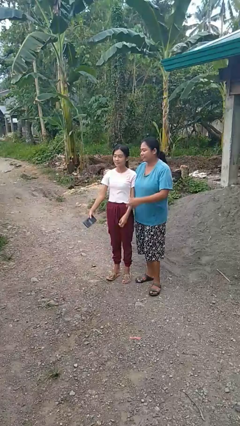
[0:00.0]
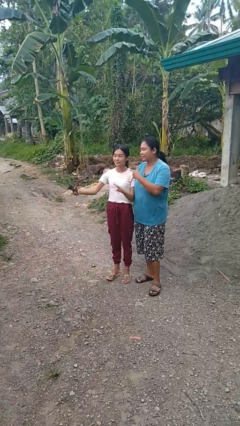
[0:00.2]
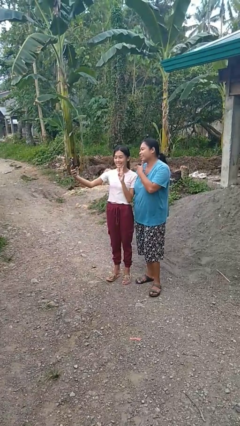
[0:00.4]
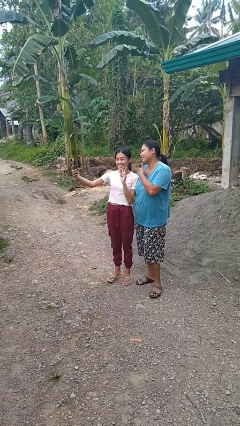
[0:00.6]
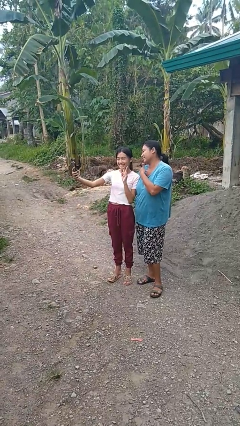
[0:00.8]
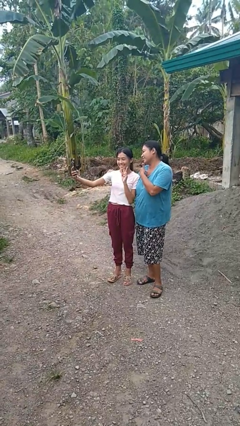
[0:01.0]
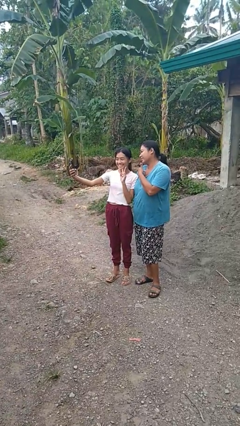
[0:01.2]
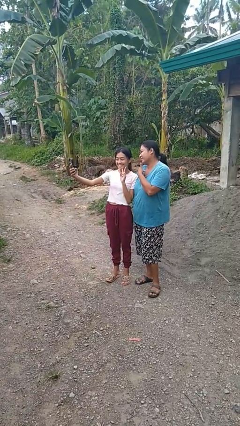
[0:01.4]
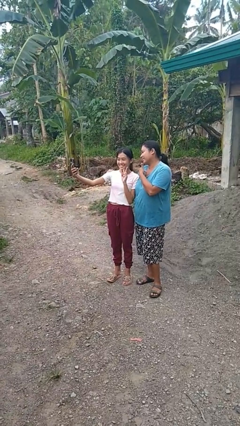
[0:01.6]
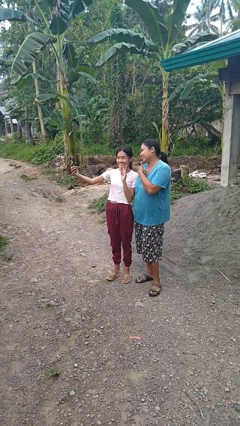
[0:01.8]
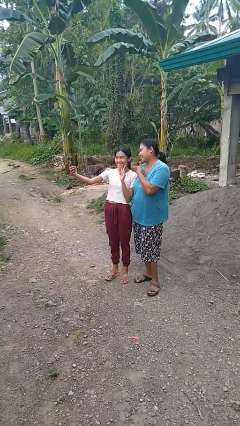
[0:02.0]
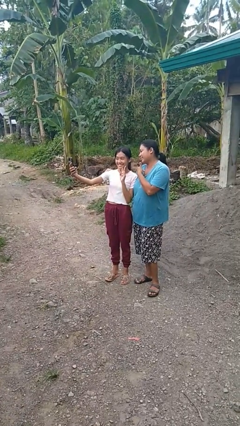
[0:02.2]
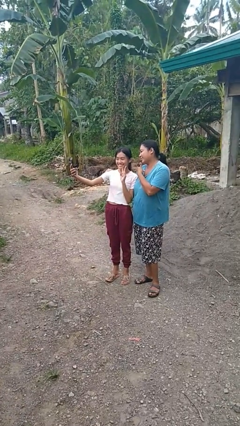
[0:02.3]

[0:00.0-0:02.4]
person takes selfie with person

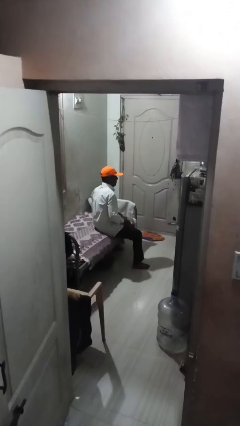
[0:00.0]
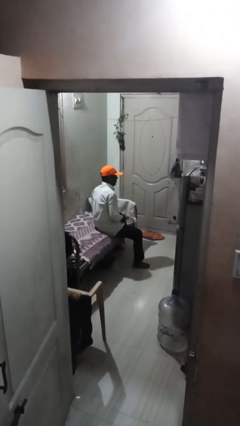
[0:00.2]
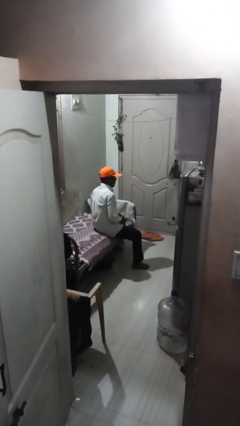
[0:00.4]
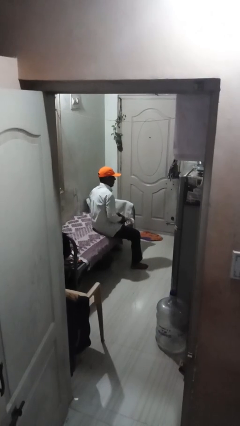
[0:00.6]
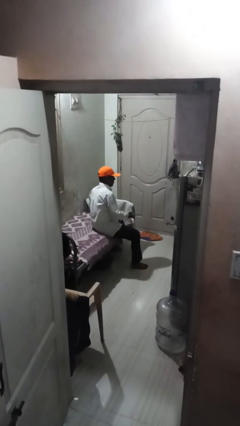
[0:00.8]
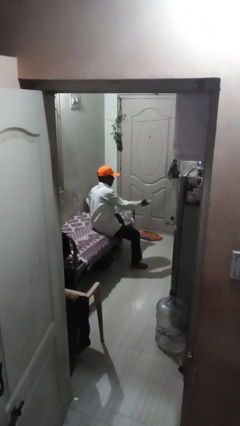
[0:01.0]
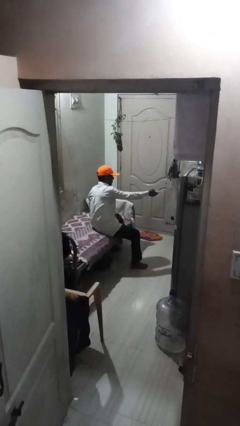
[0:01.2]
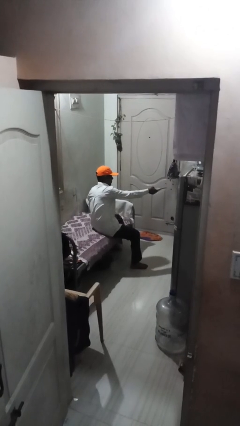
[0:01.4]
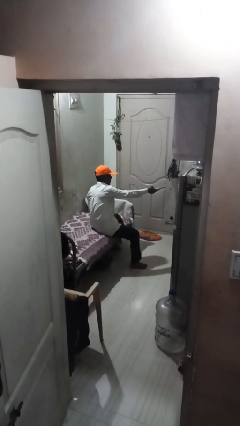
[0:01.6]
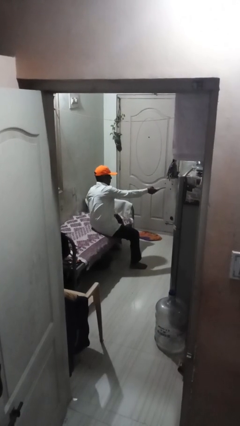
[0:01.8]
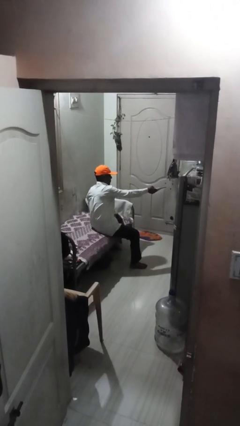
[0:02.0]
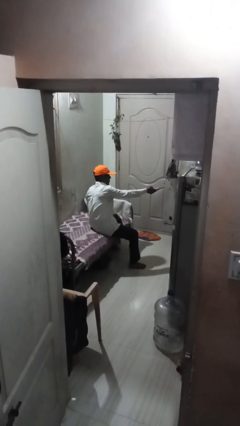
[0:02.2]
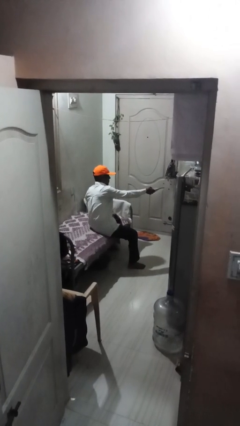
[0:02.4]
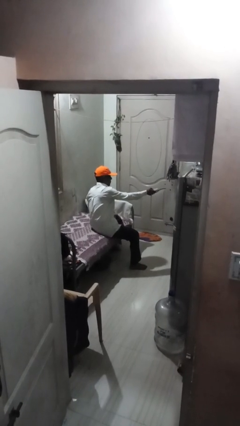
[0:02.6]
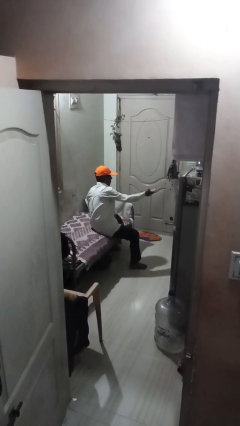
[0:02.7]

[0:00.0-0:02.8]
person uses television remote

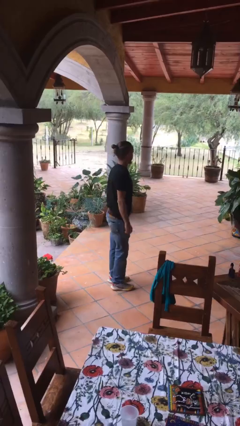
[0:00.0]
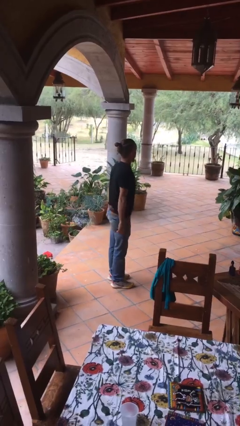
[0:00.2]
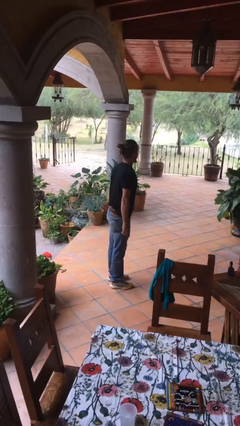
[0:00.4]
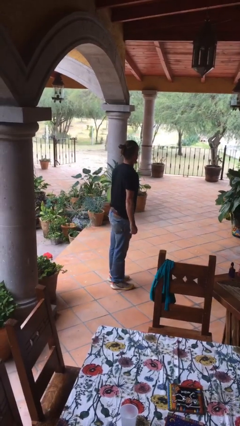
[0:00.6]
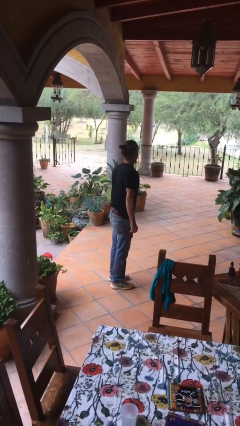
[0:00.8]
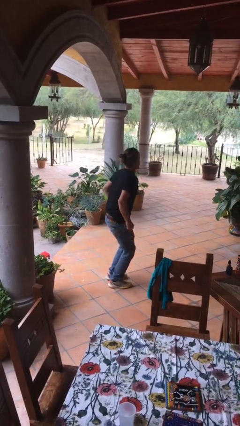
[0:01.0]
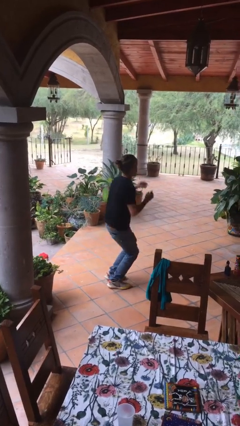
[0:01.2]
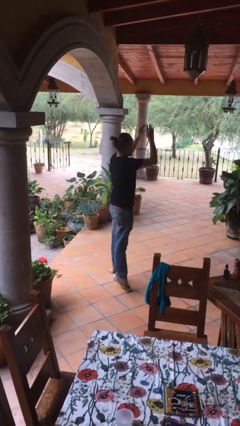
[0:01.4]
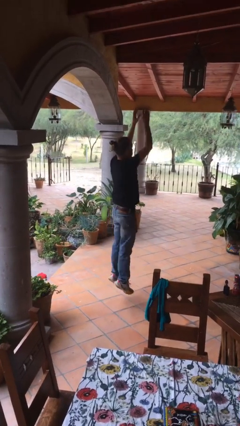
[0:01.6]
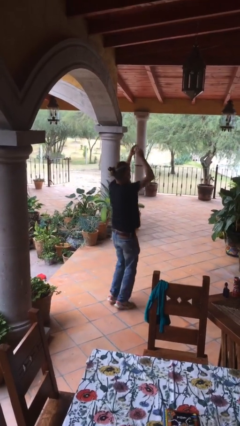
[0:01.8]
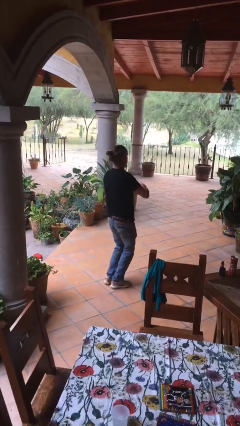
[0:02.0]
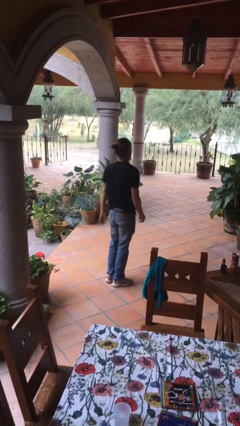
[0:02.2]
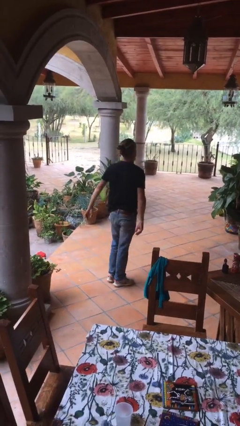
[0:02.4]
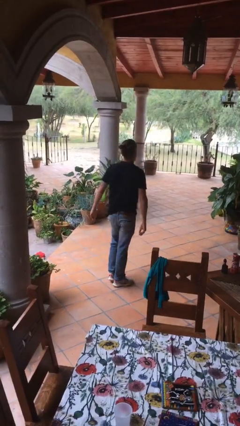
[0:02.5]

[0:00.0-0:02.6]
person jumps

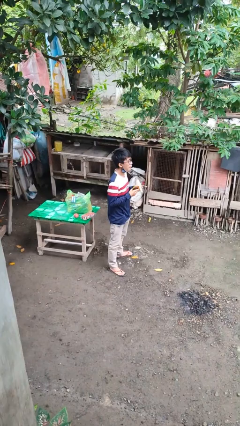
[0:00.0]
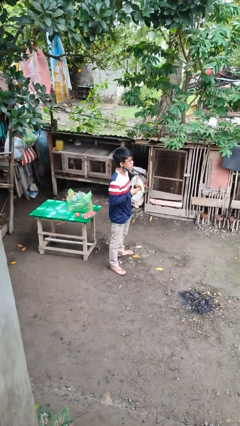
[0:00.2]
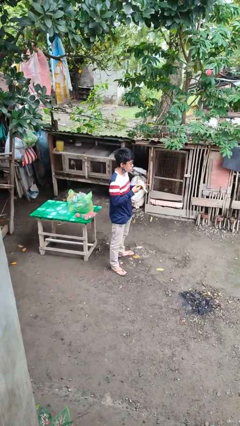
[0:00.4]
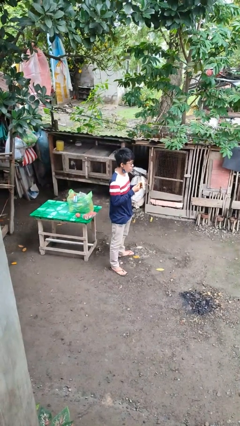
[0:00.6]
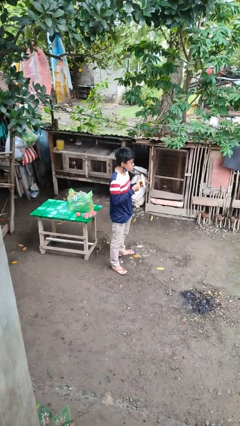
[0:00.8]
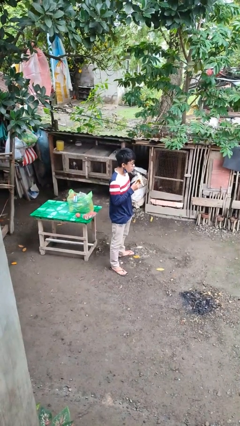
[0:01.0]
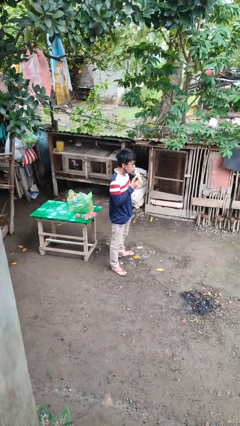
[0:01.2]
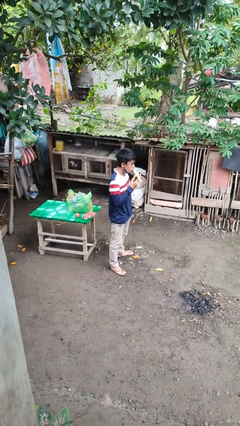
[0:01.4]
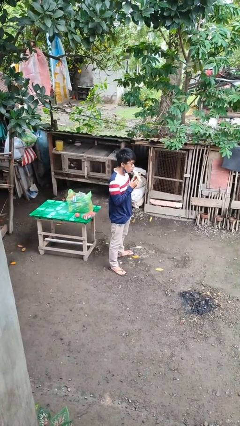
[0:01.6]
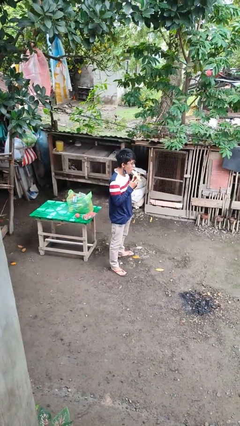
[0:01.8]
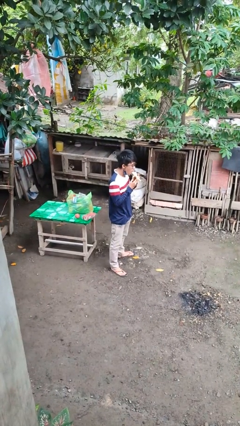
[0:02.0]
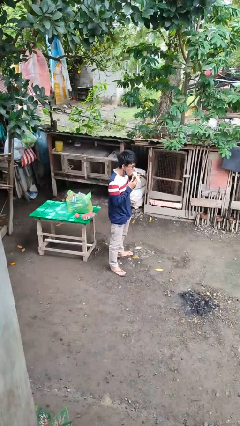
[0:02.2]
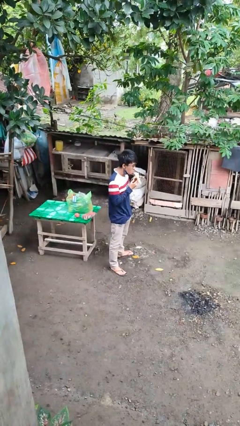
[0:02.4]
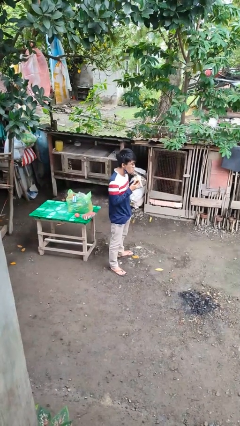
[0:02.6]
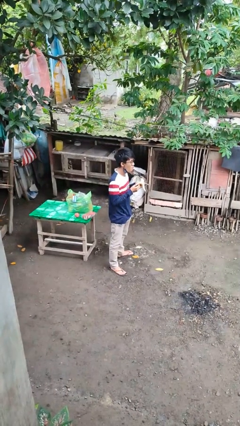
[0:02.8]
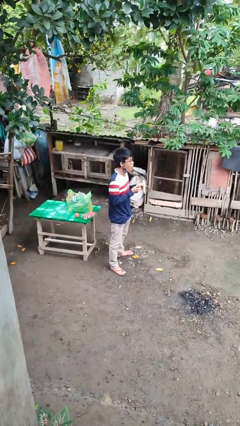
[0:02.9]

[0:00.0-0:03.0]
person eats banana

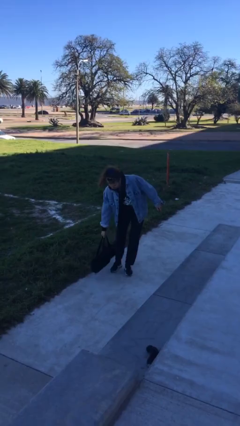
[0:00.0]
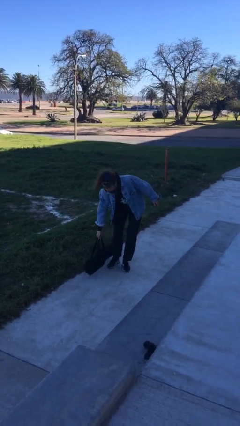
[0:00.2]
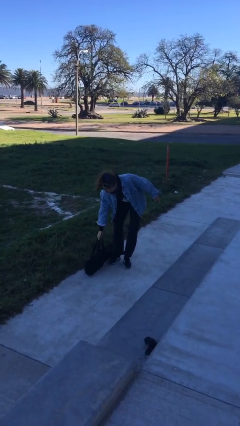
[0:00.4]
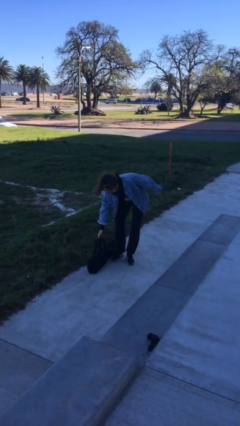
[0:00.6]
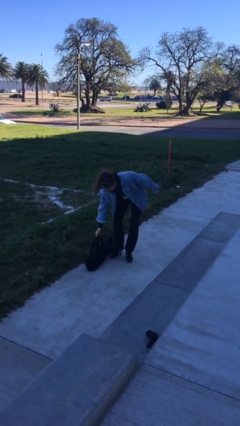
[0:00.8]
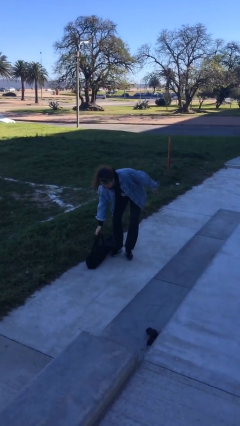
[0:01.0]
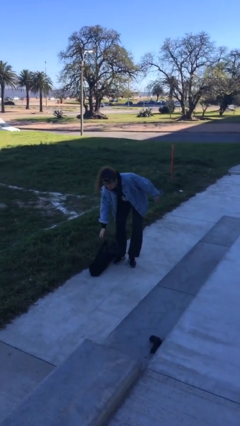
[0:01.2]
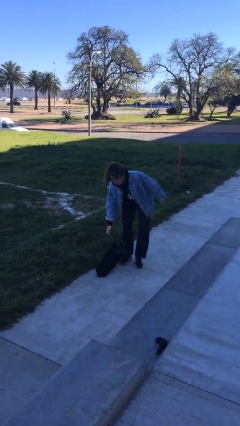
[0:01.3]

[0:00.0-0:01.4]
person puts down object on floor

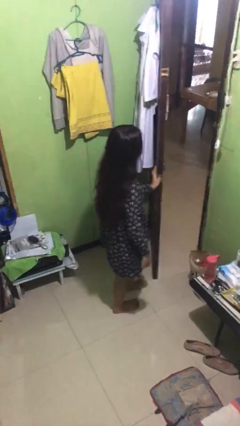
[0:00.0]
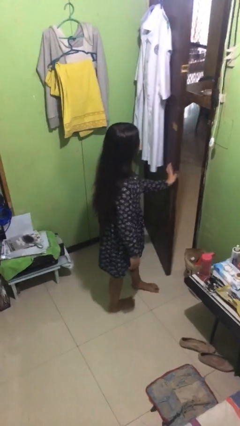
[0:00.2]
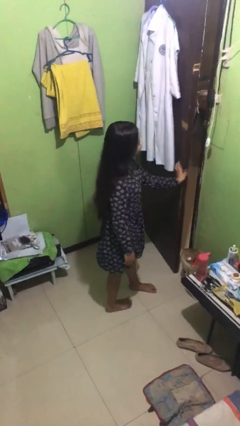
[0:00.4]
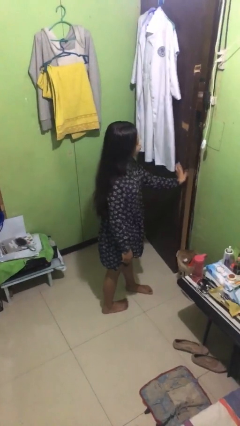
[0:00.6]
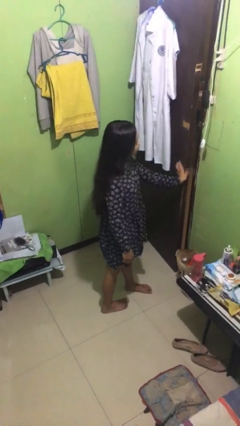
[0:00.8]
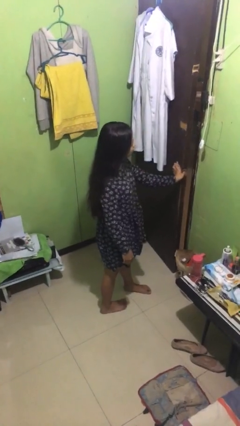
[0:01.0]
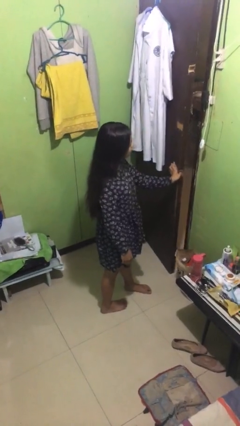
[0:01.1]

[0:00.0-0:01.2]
person closes facility door

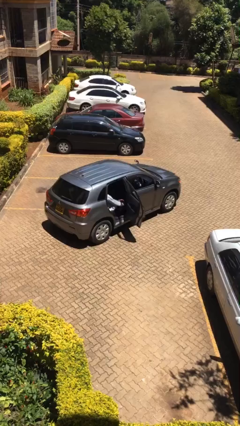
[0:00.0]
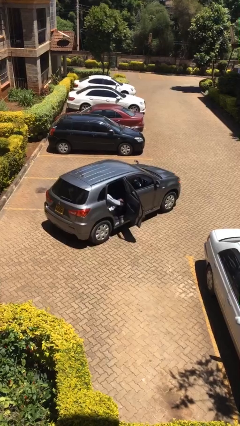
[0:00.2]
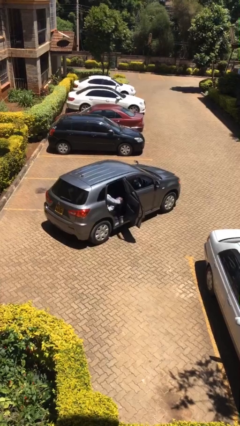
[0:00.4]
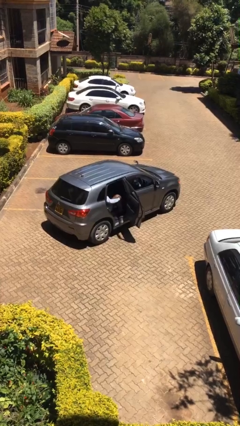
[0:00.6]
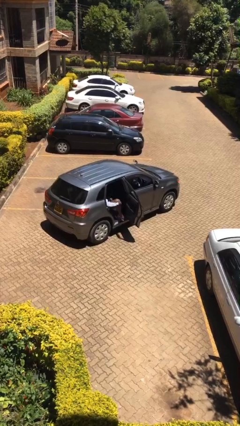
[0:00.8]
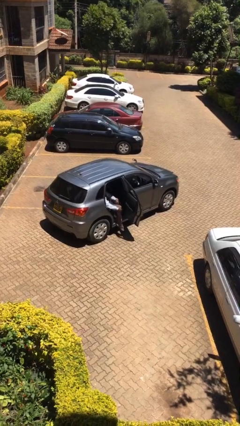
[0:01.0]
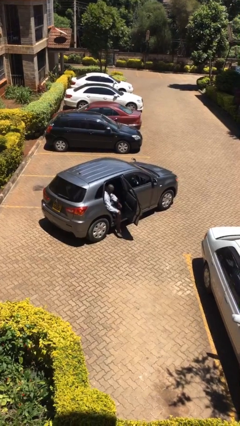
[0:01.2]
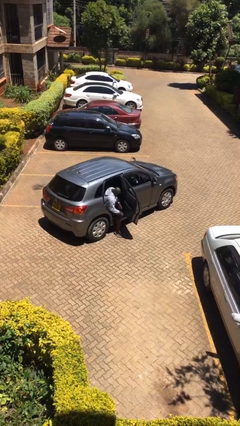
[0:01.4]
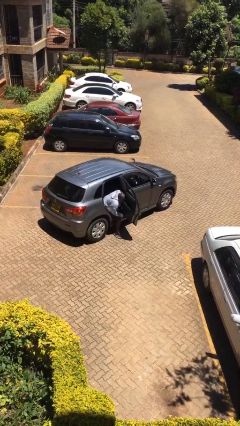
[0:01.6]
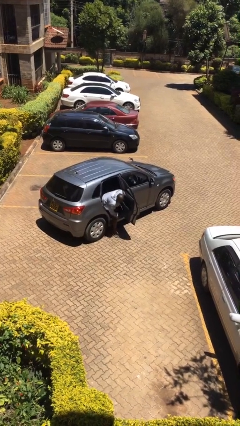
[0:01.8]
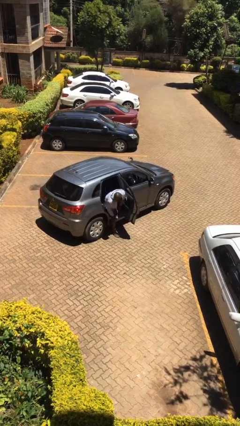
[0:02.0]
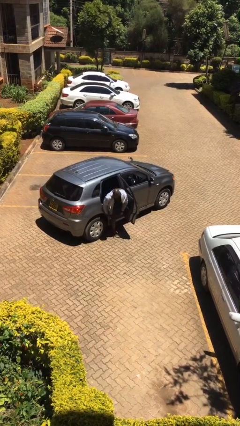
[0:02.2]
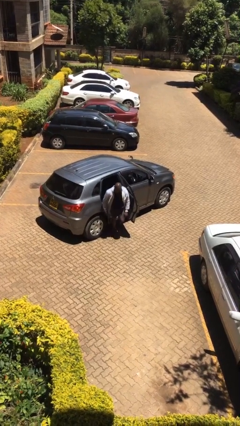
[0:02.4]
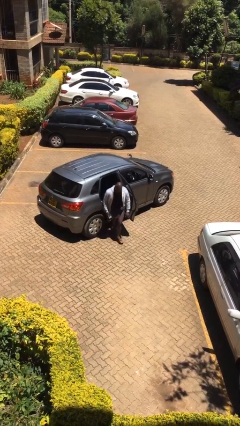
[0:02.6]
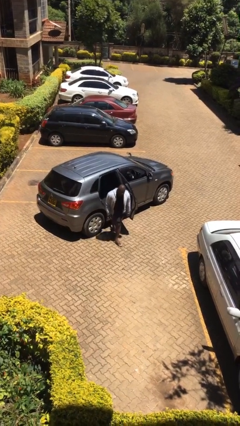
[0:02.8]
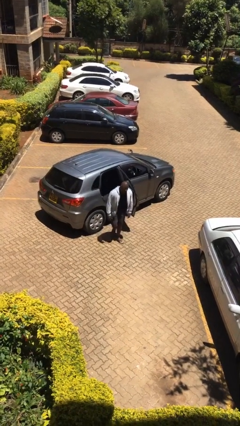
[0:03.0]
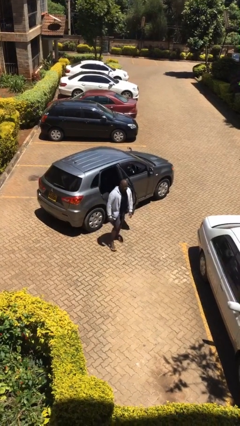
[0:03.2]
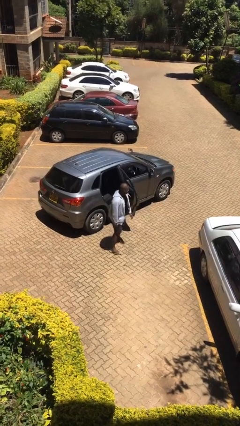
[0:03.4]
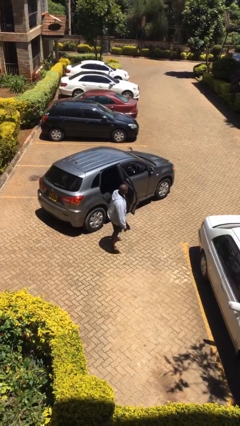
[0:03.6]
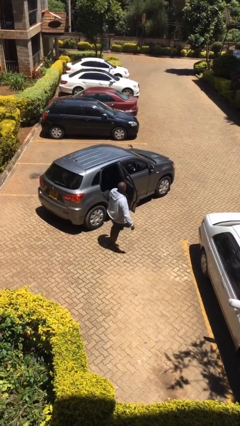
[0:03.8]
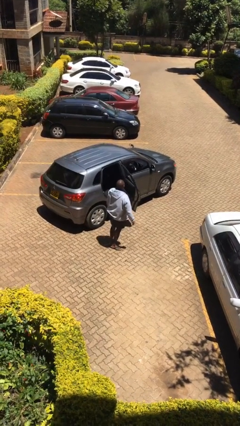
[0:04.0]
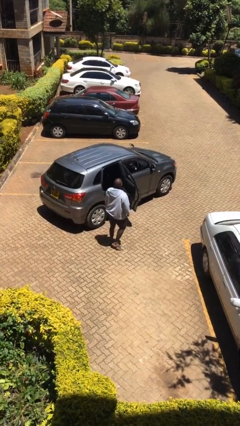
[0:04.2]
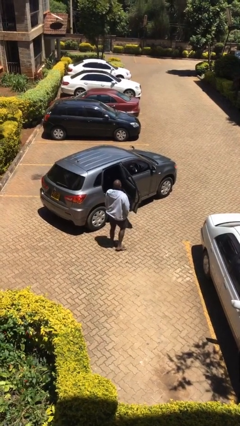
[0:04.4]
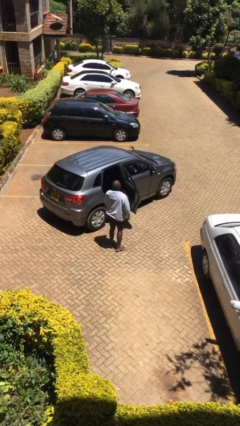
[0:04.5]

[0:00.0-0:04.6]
person exits car
